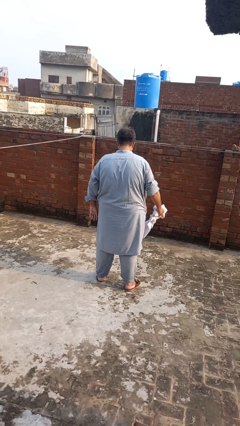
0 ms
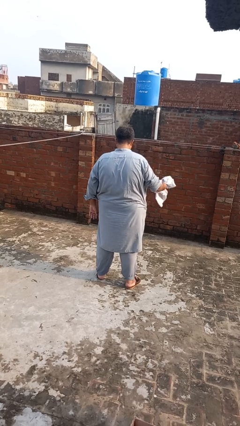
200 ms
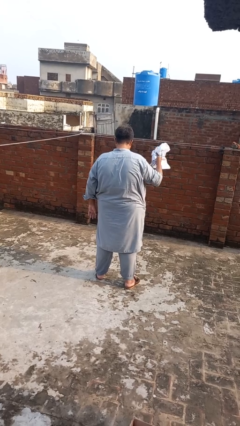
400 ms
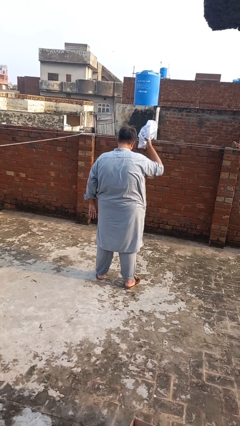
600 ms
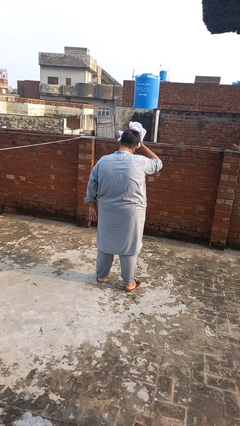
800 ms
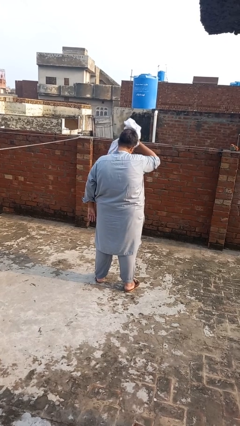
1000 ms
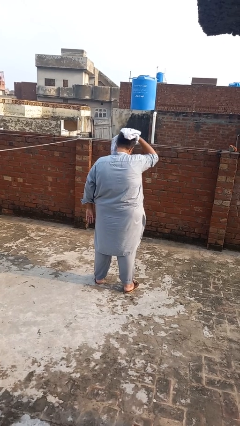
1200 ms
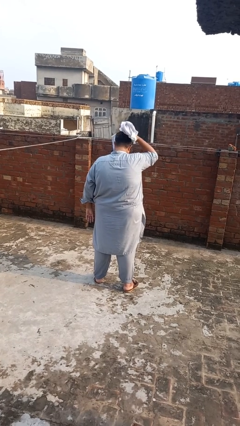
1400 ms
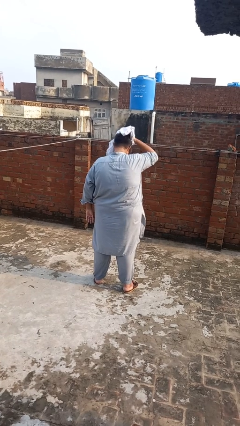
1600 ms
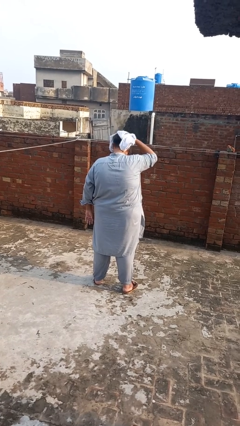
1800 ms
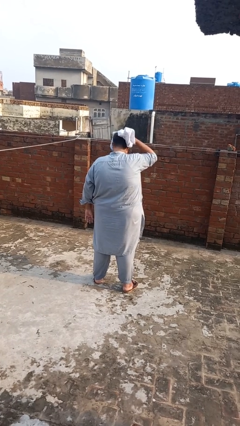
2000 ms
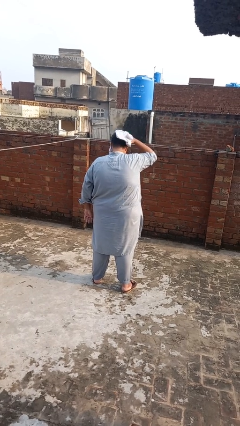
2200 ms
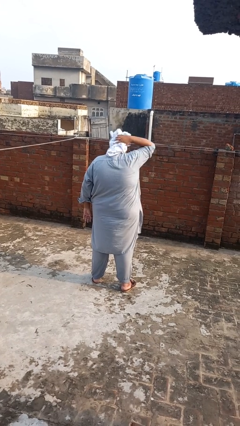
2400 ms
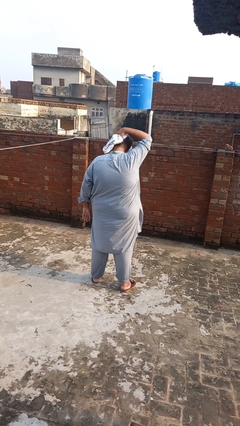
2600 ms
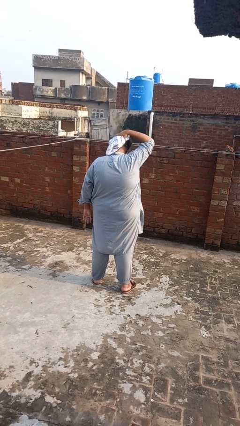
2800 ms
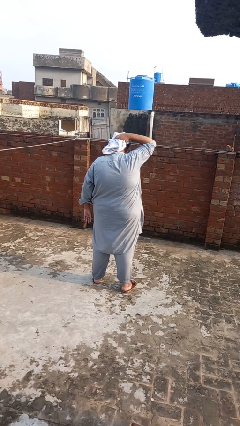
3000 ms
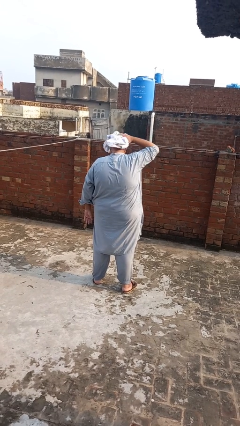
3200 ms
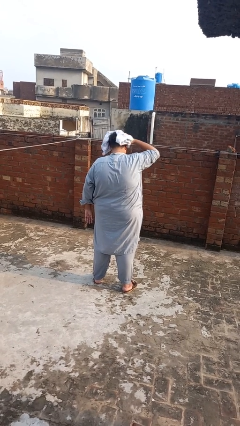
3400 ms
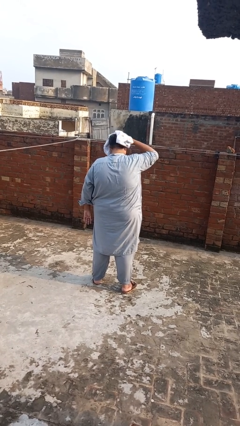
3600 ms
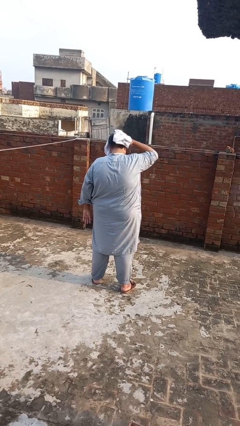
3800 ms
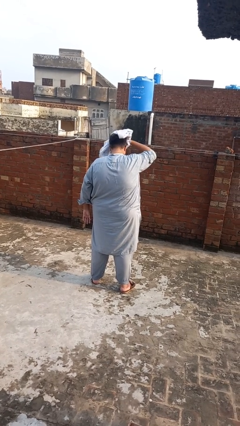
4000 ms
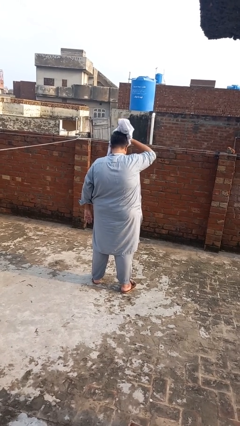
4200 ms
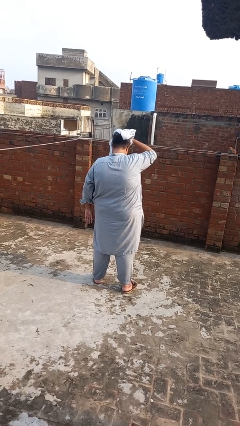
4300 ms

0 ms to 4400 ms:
person dries hair with towel

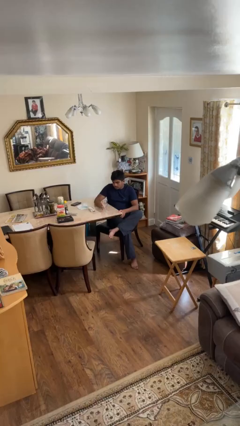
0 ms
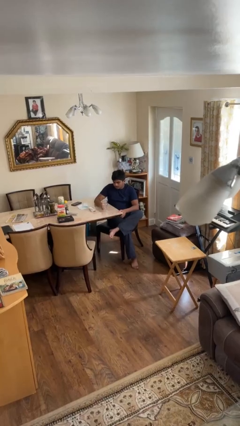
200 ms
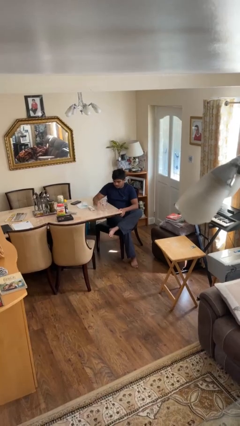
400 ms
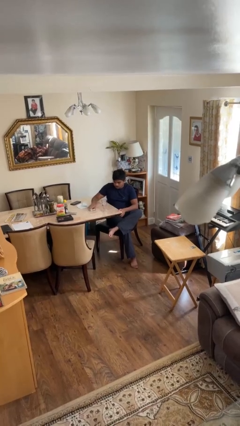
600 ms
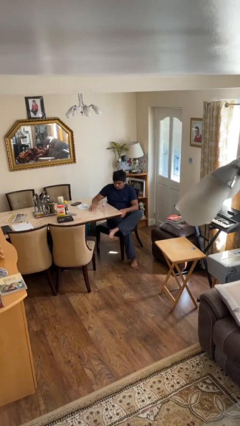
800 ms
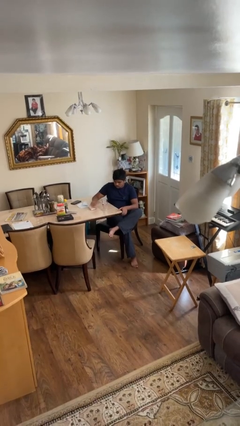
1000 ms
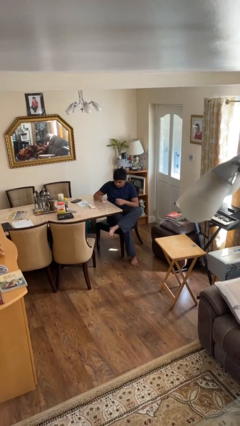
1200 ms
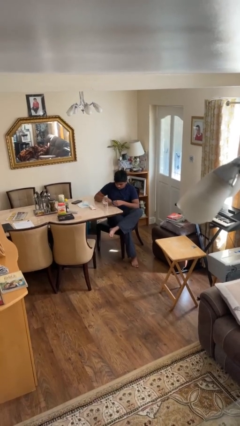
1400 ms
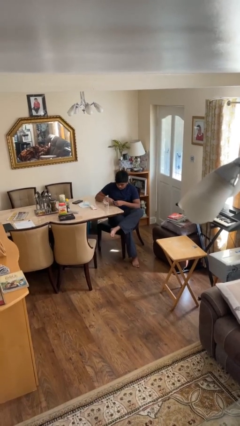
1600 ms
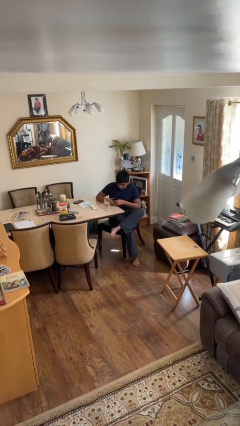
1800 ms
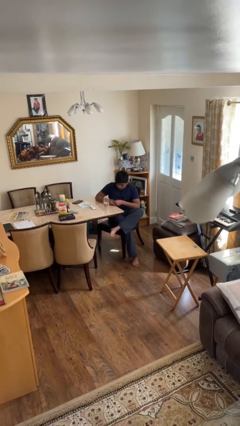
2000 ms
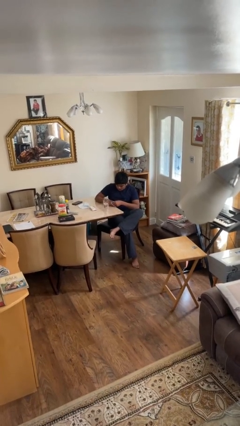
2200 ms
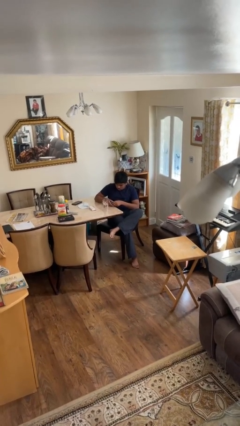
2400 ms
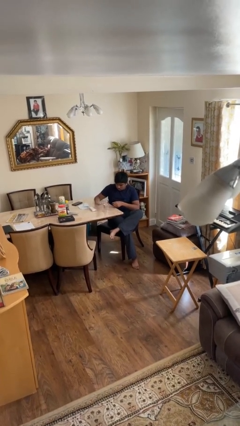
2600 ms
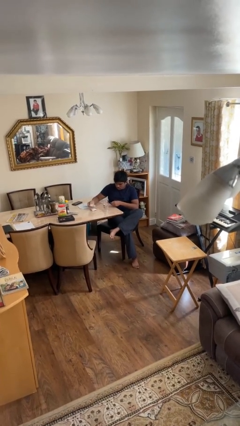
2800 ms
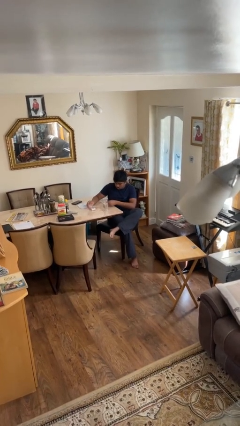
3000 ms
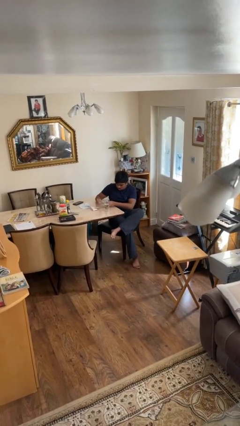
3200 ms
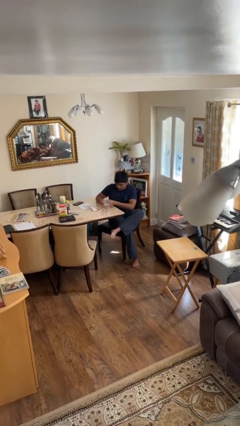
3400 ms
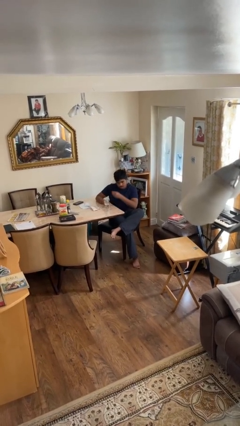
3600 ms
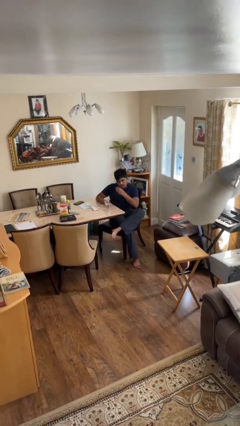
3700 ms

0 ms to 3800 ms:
person takes medicine pills

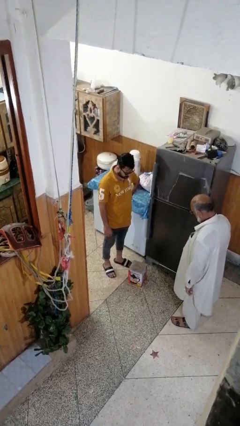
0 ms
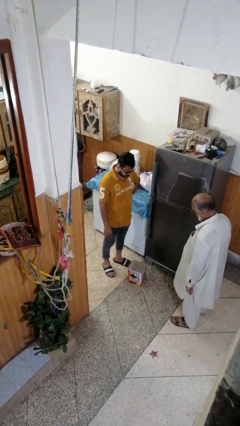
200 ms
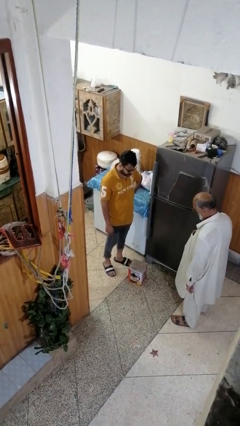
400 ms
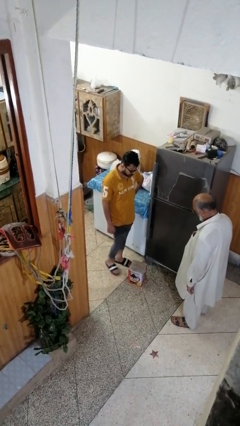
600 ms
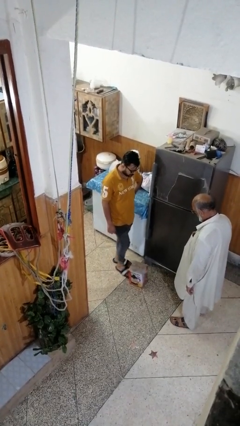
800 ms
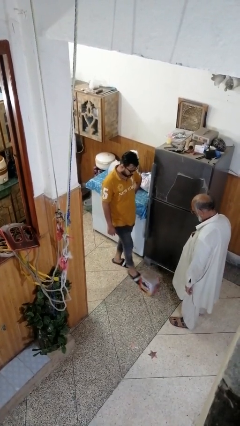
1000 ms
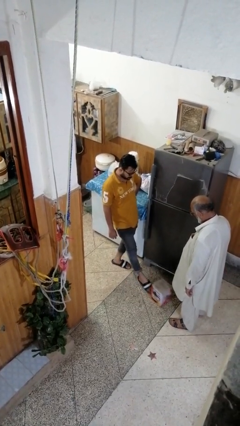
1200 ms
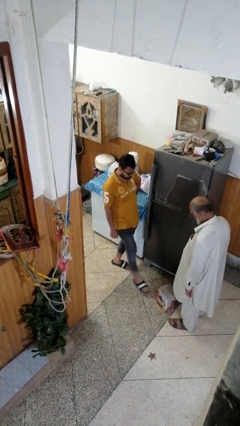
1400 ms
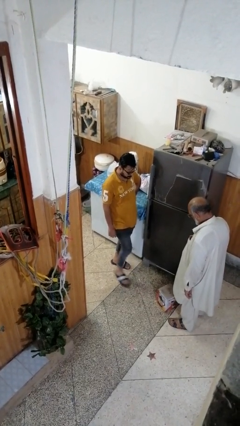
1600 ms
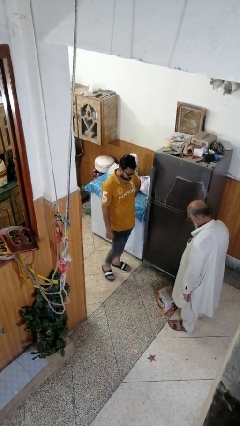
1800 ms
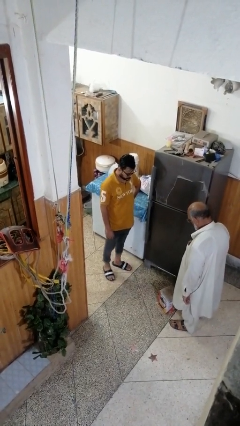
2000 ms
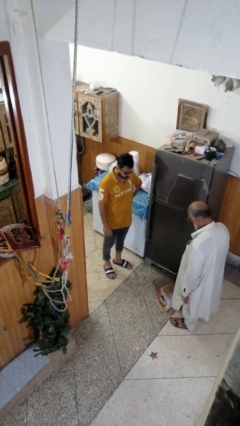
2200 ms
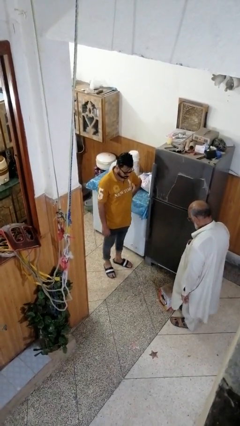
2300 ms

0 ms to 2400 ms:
person kicks object to person

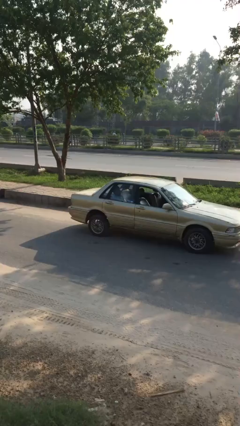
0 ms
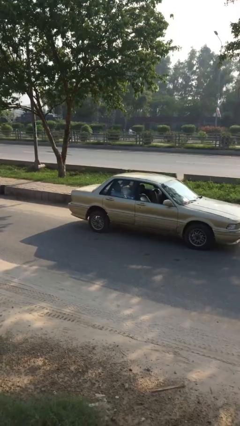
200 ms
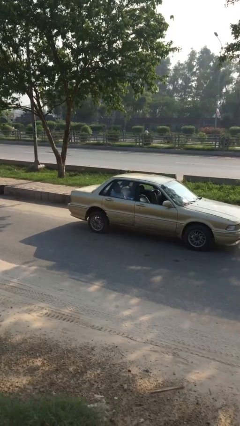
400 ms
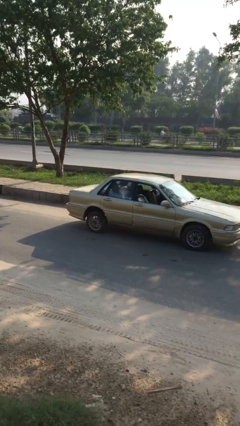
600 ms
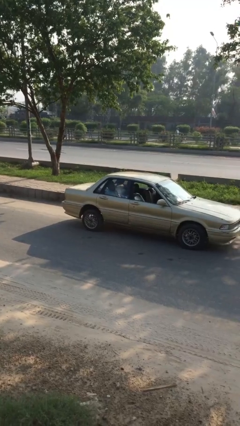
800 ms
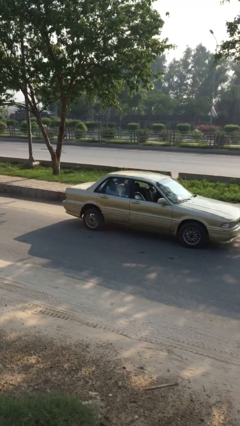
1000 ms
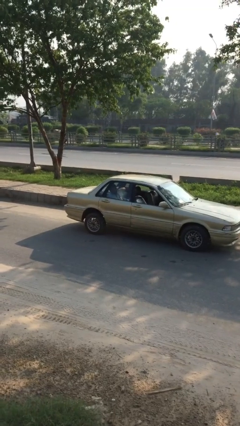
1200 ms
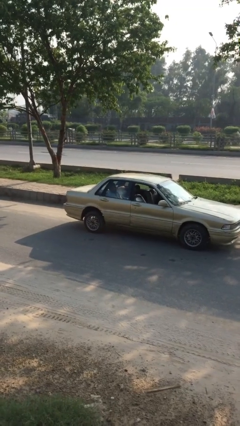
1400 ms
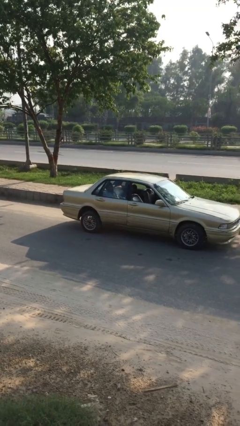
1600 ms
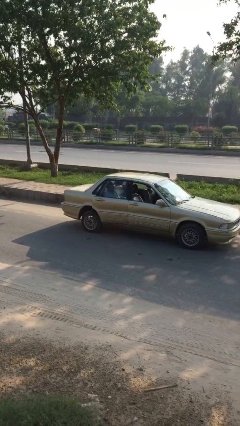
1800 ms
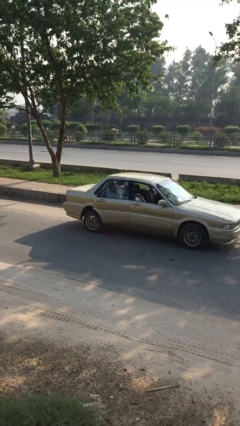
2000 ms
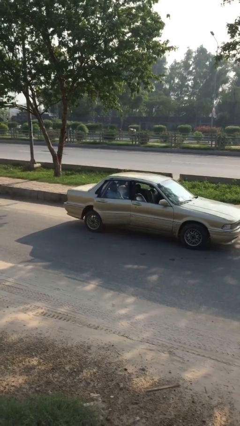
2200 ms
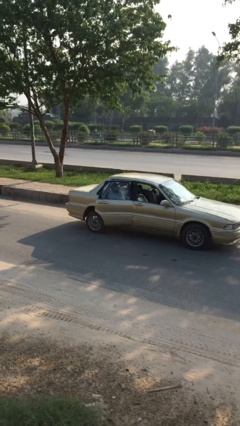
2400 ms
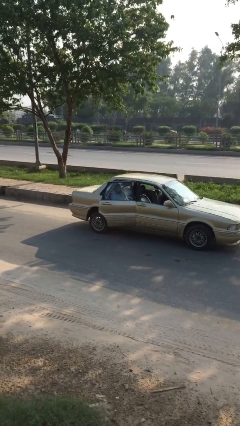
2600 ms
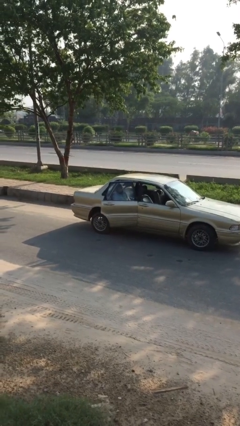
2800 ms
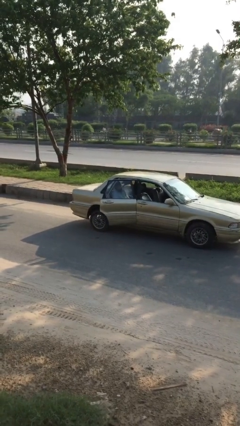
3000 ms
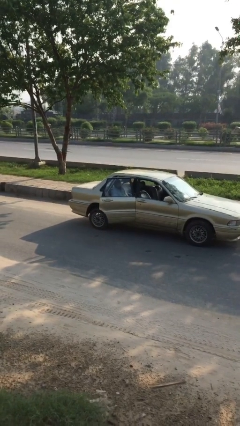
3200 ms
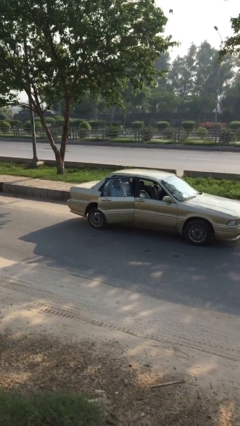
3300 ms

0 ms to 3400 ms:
person opens car door

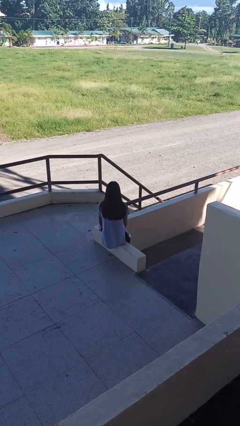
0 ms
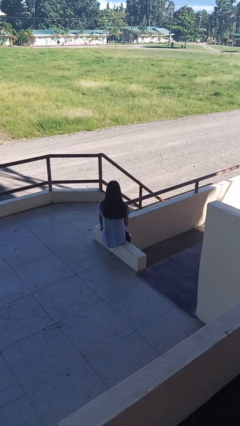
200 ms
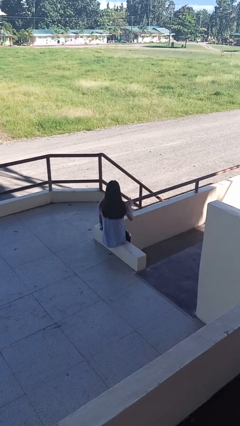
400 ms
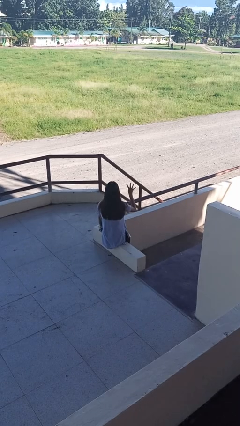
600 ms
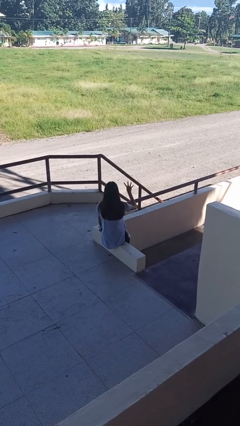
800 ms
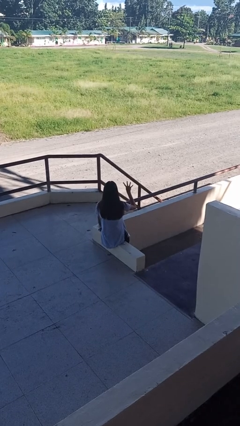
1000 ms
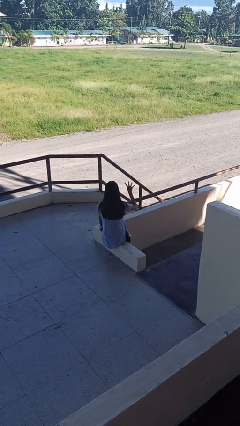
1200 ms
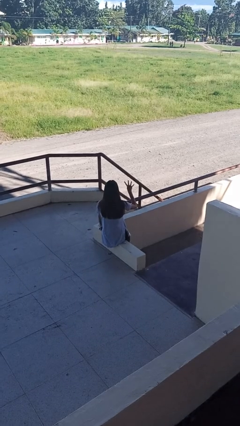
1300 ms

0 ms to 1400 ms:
person gestures number four

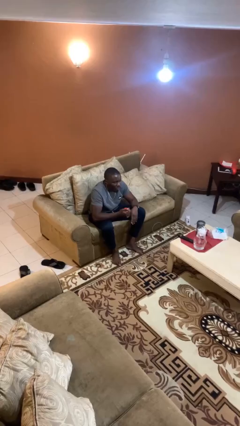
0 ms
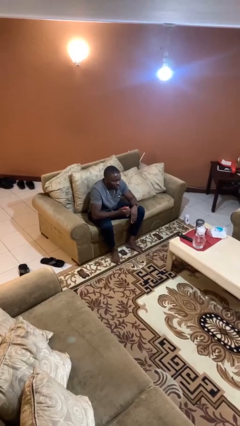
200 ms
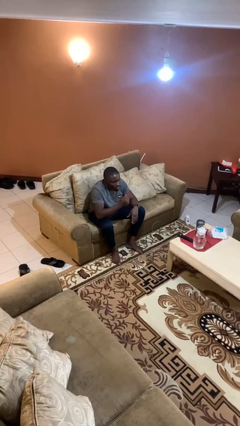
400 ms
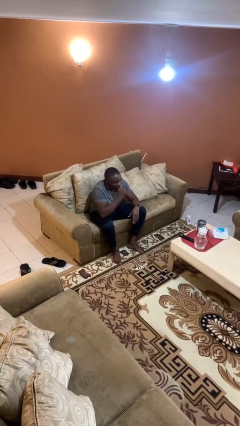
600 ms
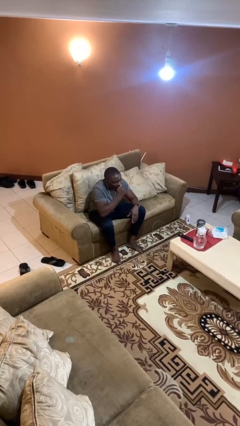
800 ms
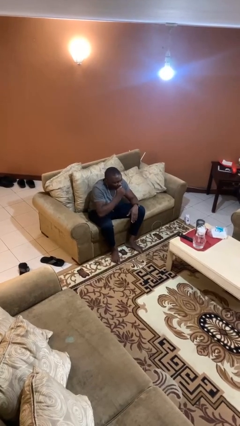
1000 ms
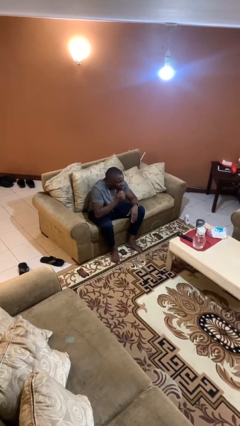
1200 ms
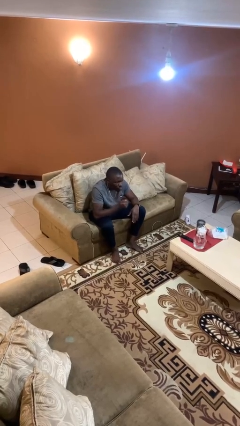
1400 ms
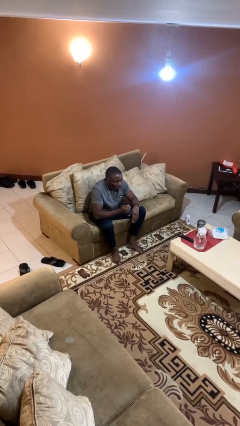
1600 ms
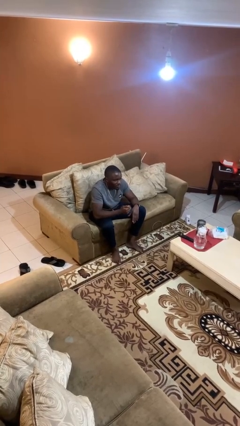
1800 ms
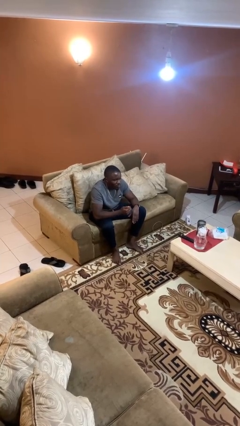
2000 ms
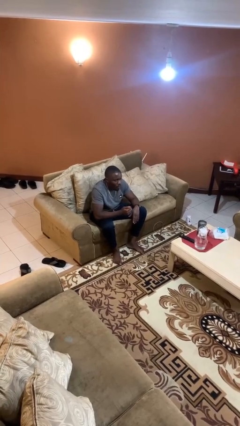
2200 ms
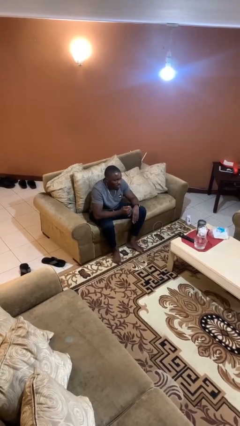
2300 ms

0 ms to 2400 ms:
person eats apple
